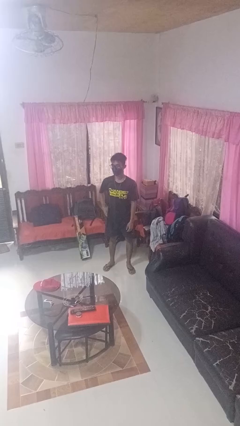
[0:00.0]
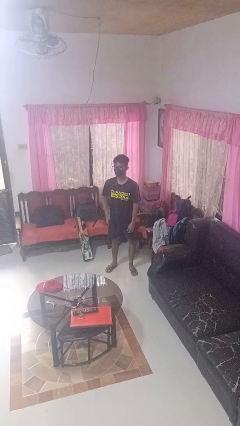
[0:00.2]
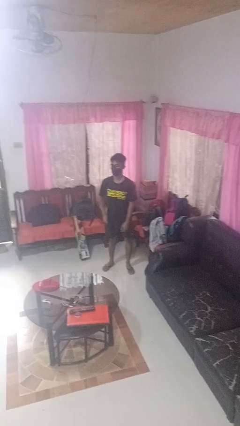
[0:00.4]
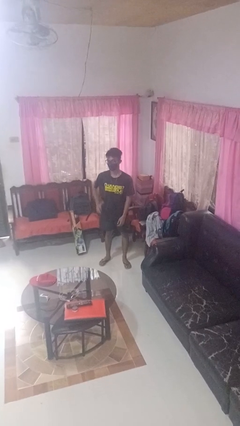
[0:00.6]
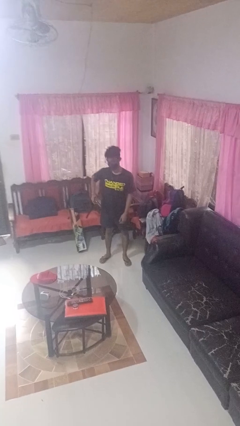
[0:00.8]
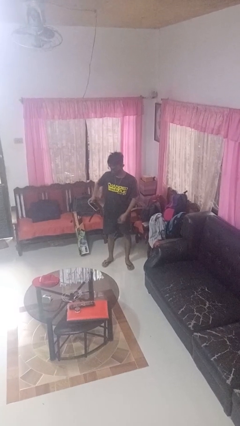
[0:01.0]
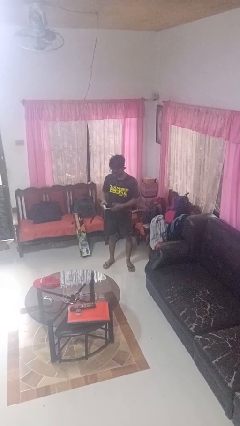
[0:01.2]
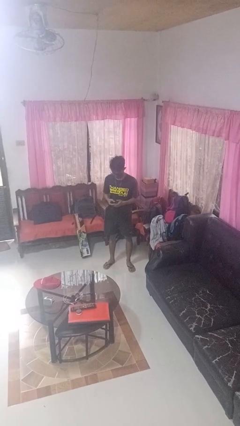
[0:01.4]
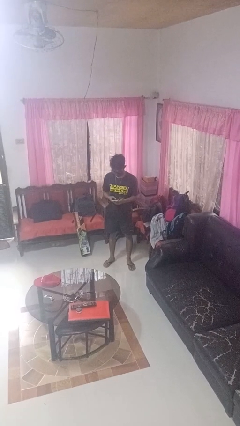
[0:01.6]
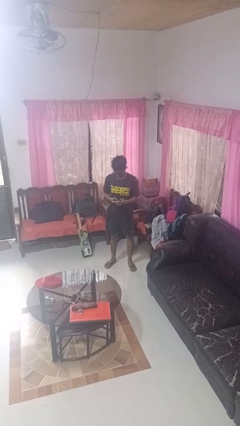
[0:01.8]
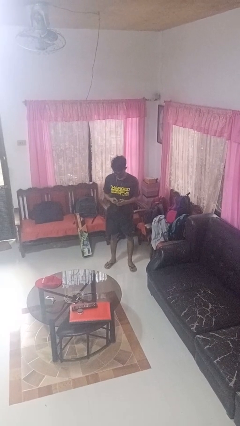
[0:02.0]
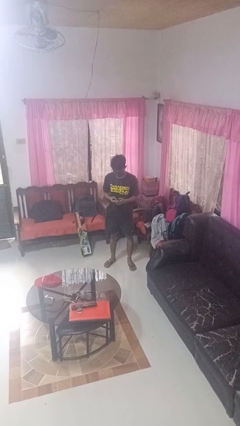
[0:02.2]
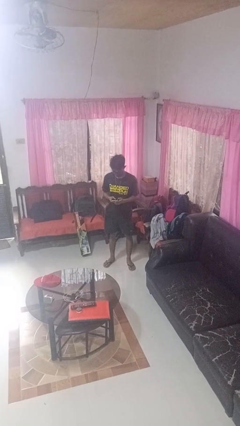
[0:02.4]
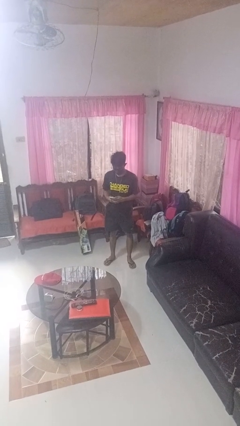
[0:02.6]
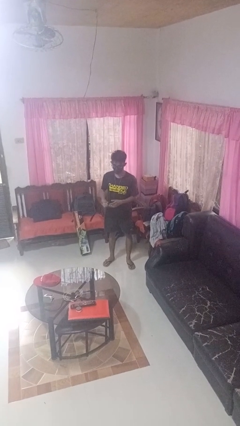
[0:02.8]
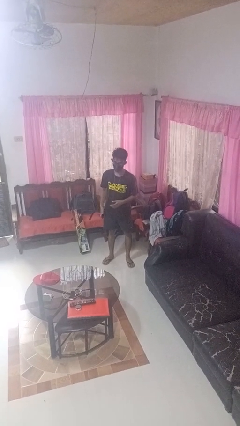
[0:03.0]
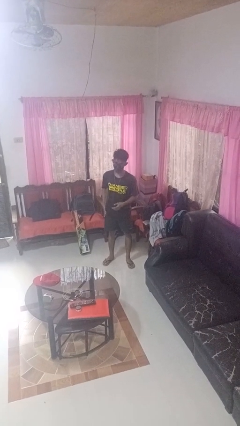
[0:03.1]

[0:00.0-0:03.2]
person takes phone from pocket

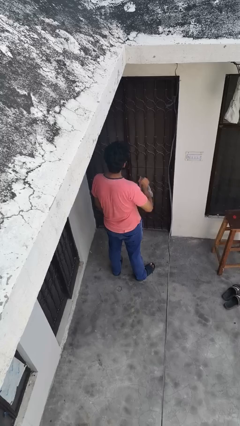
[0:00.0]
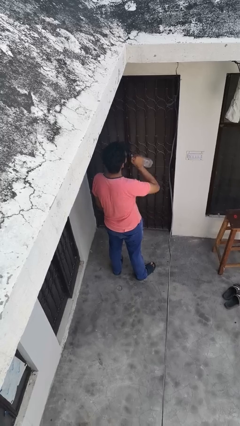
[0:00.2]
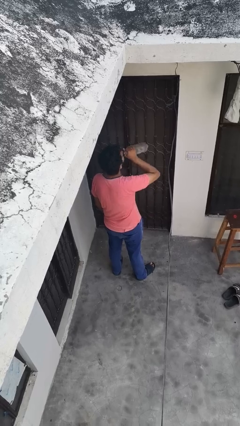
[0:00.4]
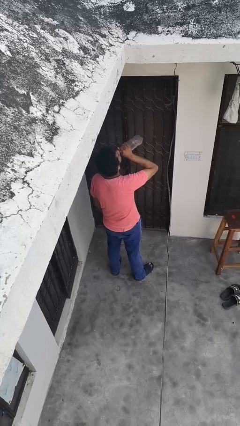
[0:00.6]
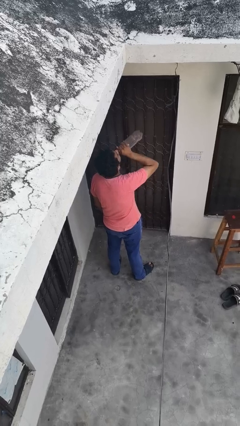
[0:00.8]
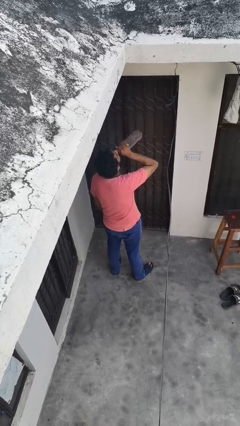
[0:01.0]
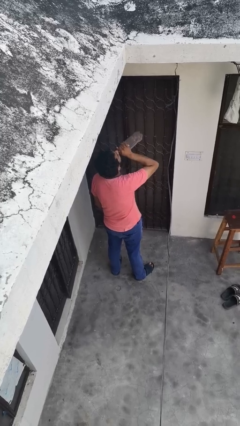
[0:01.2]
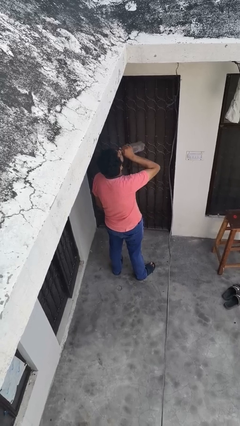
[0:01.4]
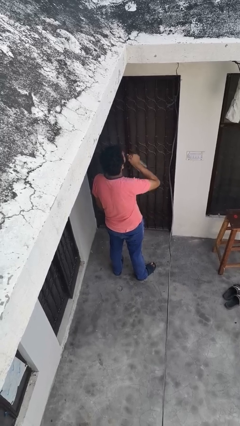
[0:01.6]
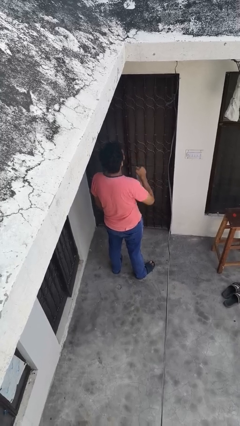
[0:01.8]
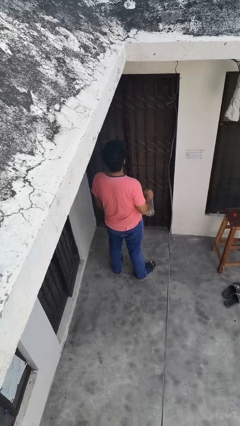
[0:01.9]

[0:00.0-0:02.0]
person drinks from bottle

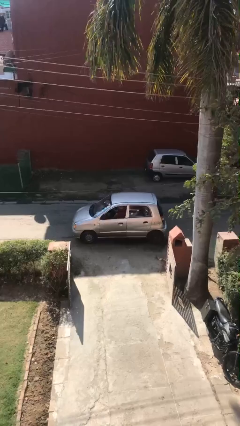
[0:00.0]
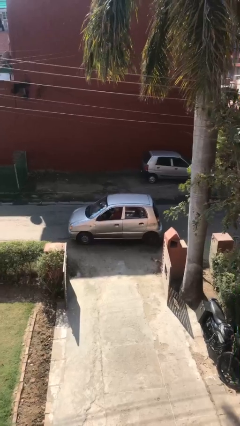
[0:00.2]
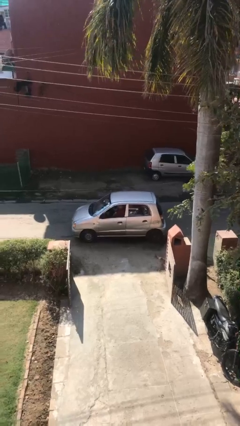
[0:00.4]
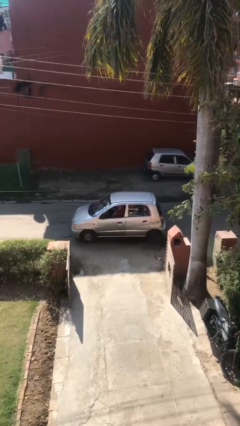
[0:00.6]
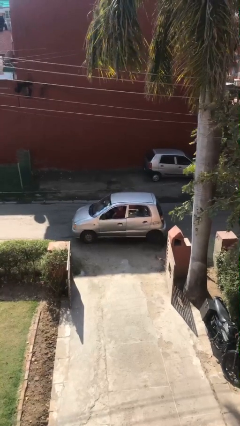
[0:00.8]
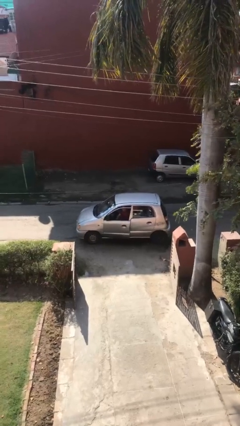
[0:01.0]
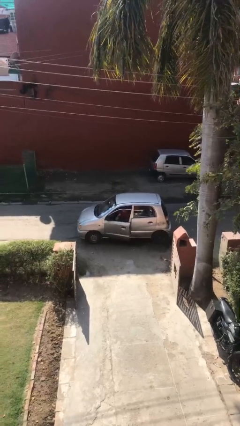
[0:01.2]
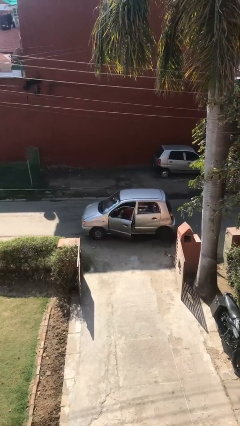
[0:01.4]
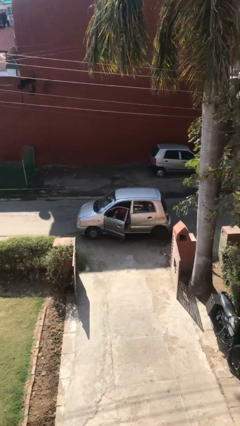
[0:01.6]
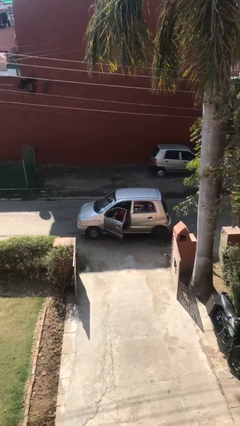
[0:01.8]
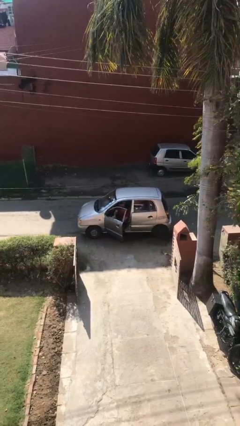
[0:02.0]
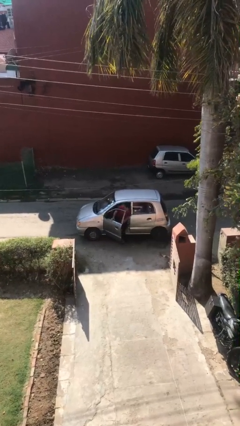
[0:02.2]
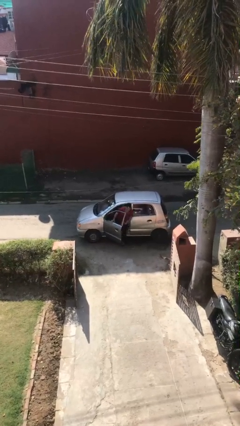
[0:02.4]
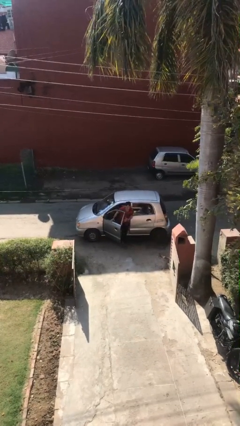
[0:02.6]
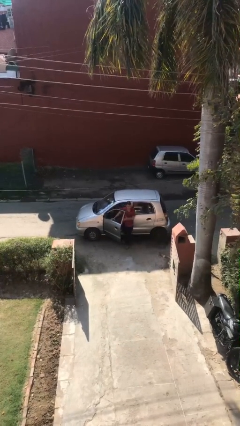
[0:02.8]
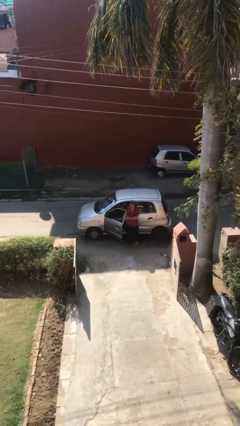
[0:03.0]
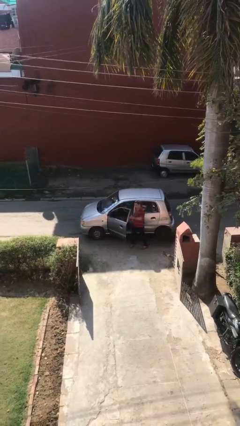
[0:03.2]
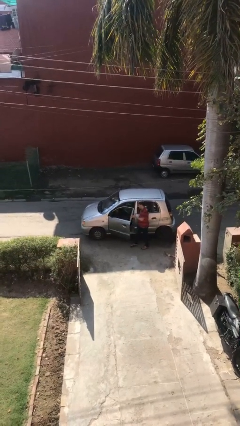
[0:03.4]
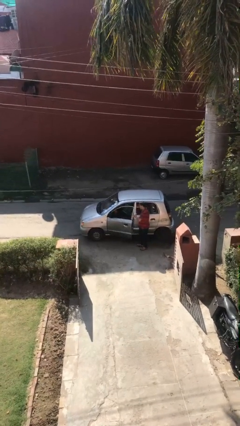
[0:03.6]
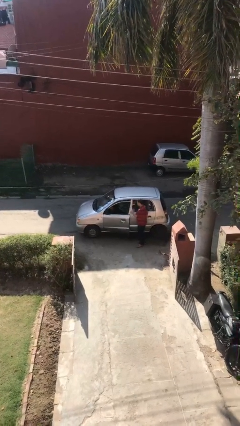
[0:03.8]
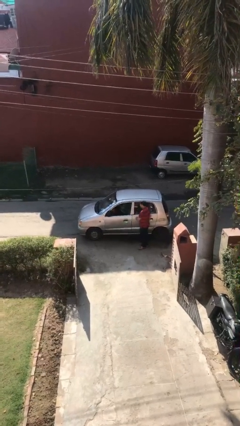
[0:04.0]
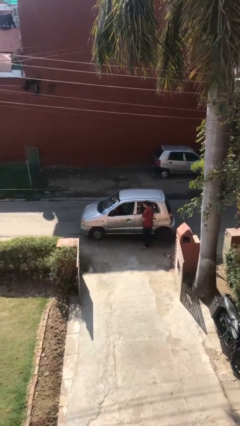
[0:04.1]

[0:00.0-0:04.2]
car drops off person

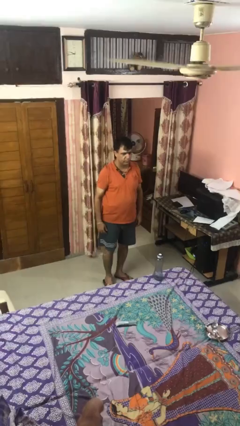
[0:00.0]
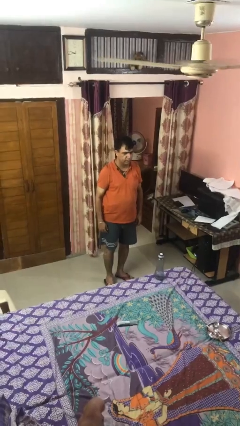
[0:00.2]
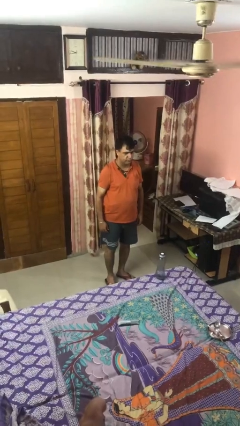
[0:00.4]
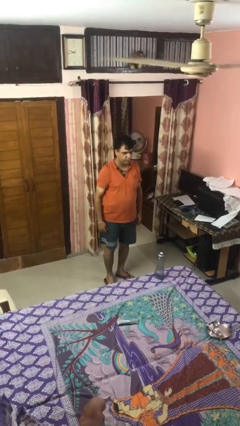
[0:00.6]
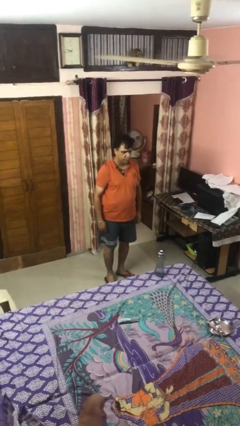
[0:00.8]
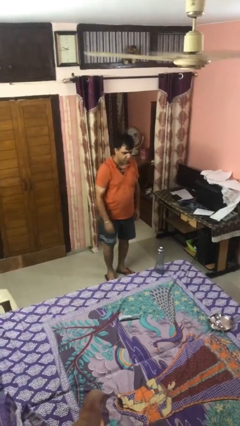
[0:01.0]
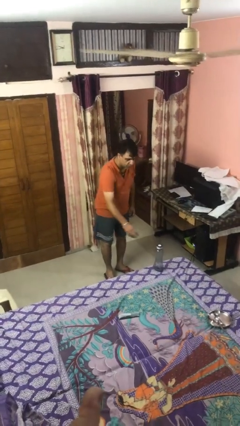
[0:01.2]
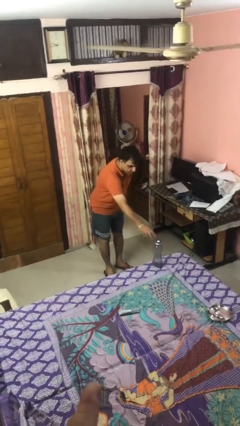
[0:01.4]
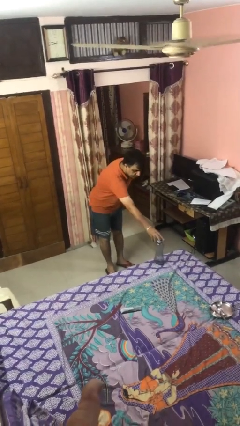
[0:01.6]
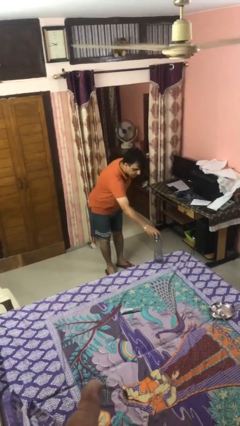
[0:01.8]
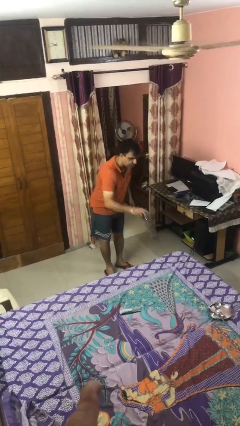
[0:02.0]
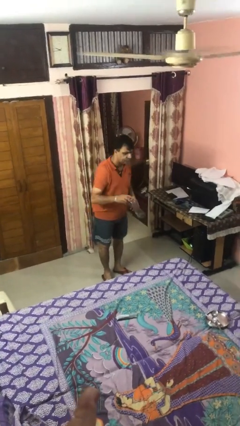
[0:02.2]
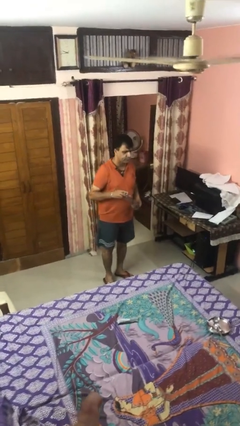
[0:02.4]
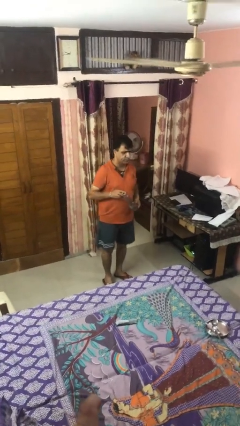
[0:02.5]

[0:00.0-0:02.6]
person picks up object from bed

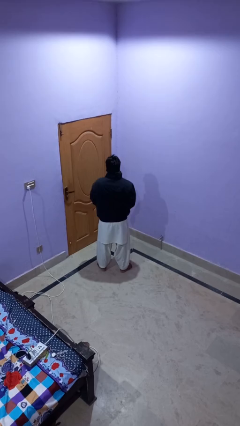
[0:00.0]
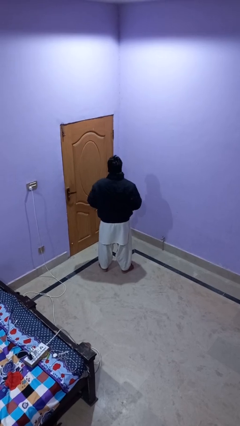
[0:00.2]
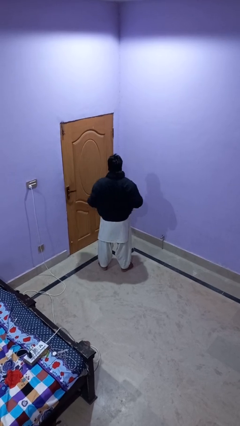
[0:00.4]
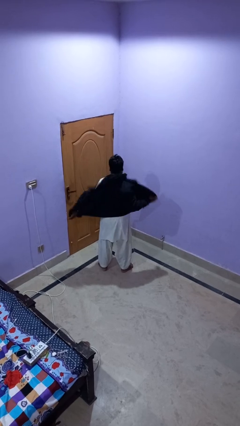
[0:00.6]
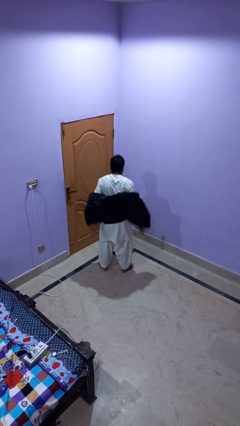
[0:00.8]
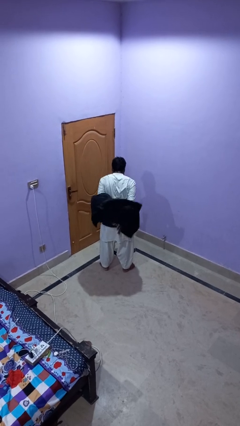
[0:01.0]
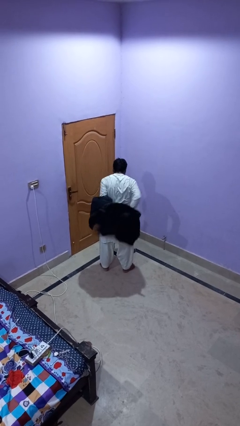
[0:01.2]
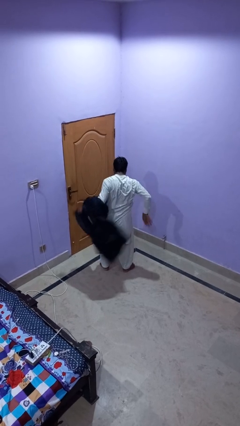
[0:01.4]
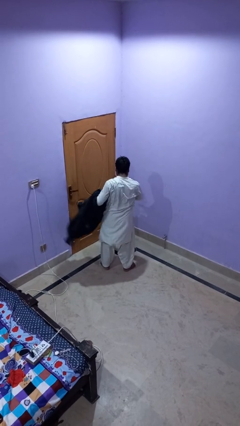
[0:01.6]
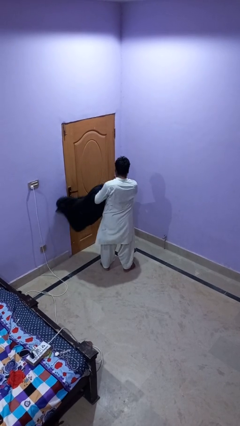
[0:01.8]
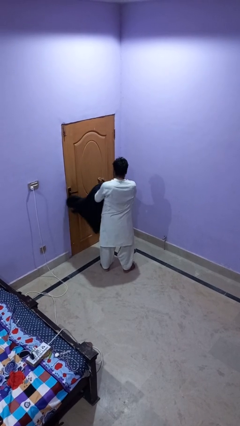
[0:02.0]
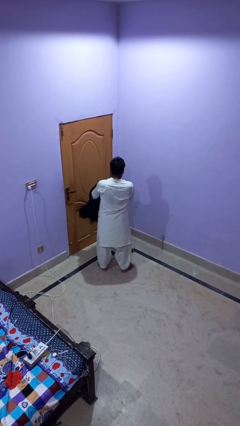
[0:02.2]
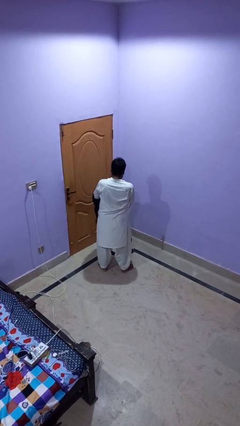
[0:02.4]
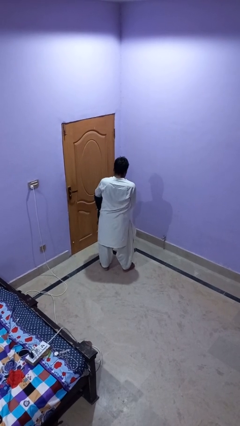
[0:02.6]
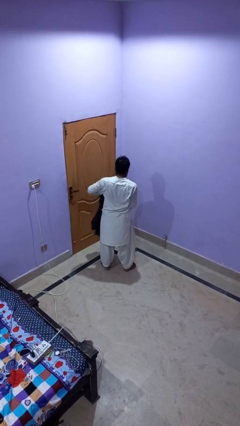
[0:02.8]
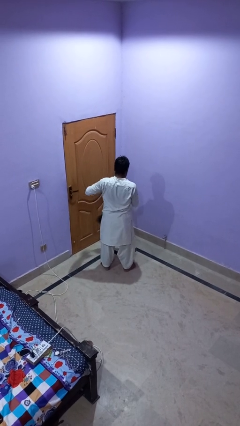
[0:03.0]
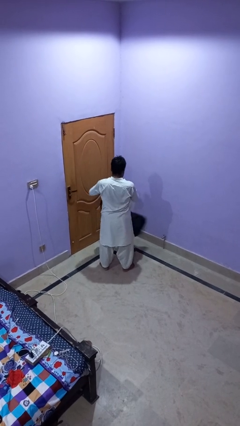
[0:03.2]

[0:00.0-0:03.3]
person takes off jacket

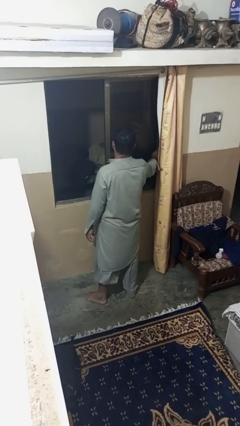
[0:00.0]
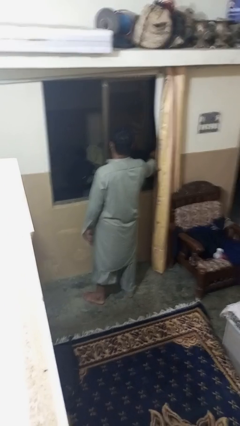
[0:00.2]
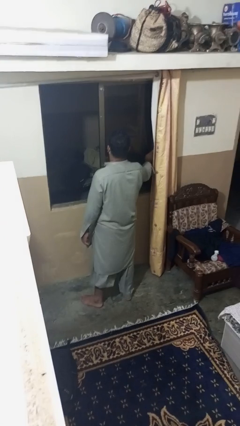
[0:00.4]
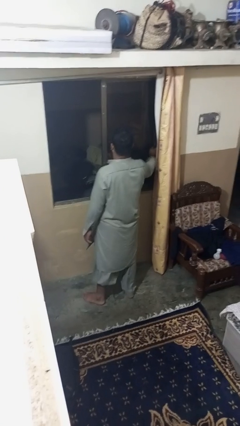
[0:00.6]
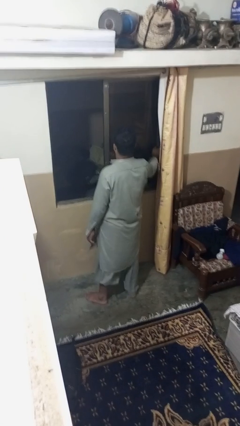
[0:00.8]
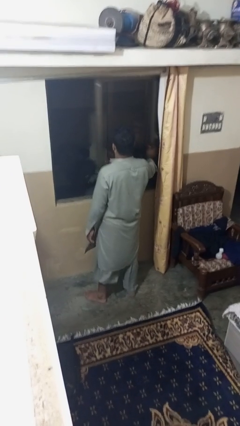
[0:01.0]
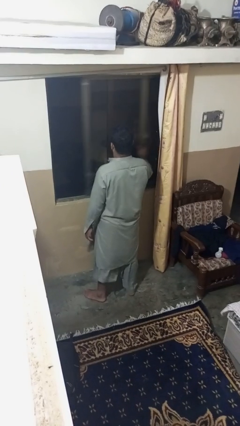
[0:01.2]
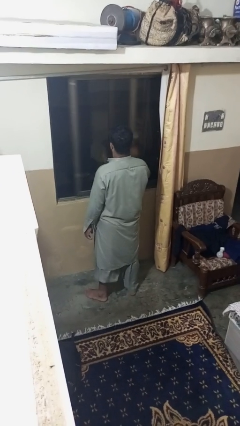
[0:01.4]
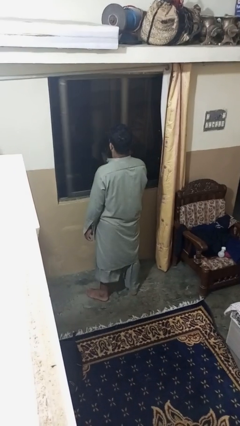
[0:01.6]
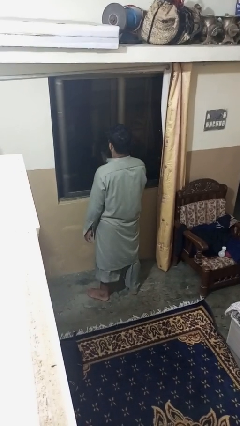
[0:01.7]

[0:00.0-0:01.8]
person closes home window

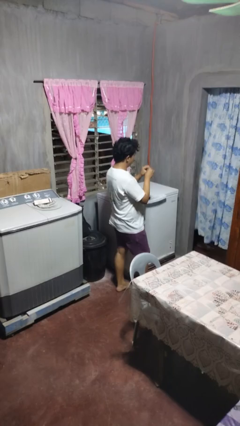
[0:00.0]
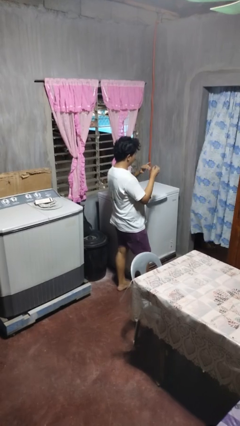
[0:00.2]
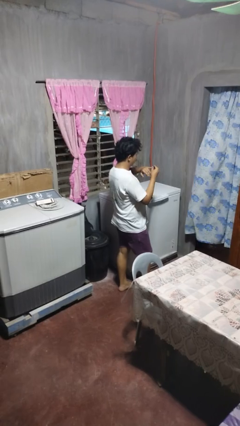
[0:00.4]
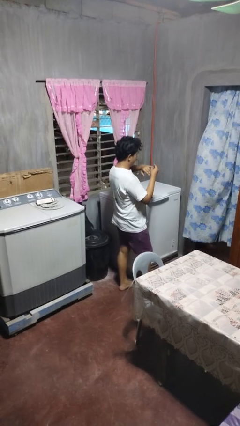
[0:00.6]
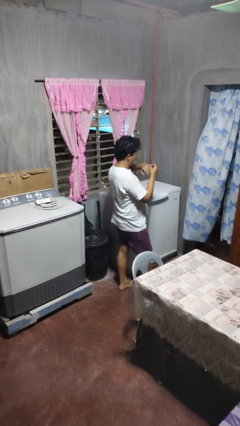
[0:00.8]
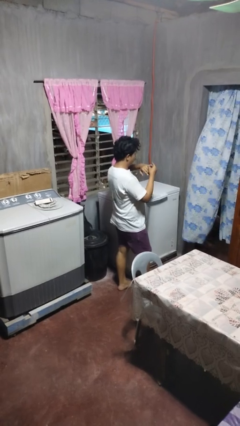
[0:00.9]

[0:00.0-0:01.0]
person puts on ring
